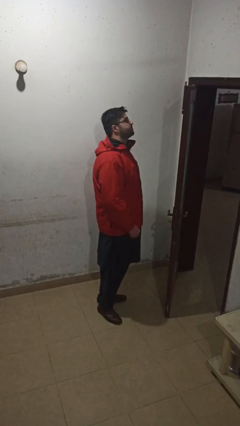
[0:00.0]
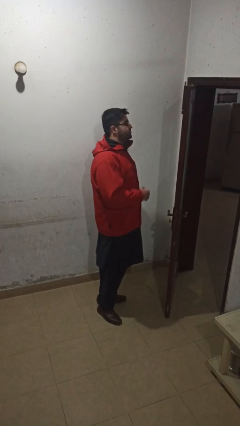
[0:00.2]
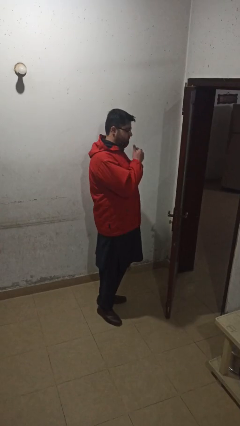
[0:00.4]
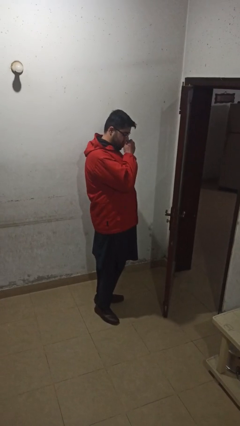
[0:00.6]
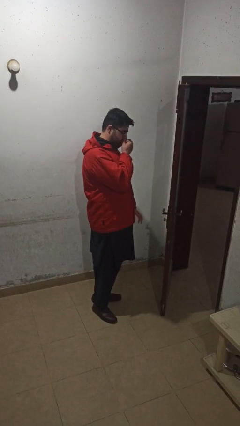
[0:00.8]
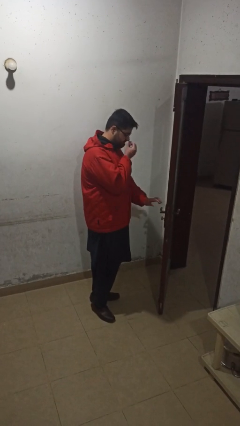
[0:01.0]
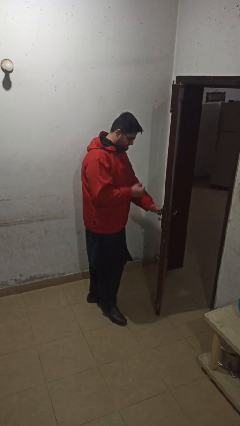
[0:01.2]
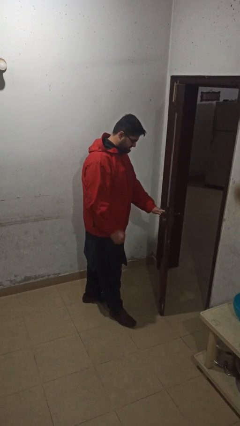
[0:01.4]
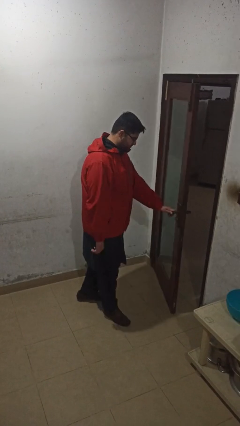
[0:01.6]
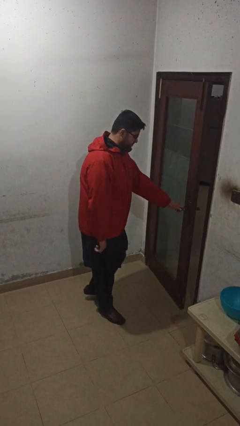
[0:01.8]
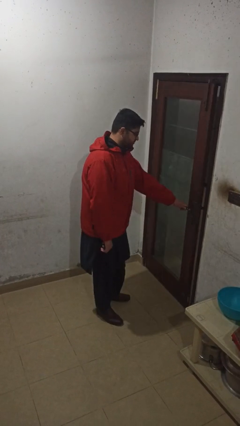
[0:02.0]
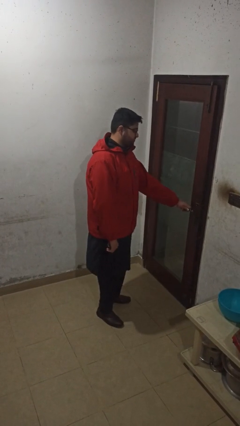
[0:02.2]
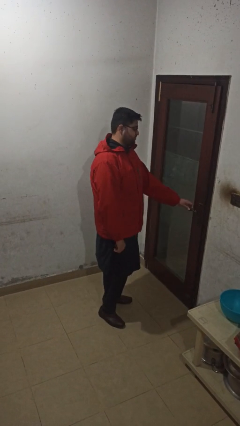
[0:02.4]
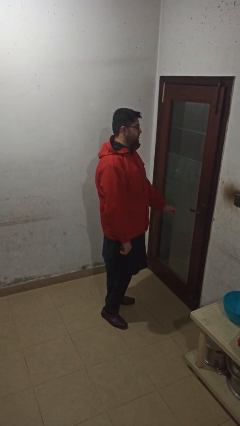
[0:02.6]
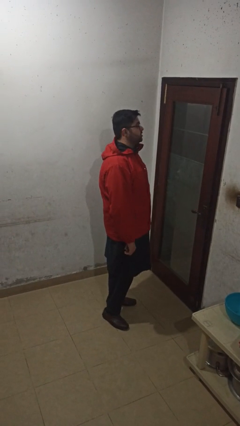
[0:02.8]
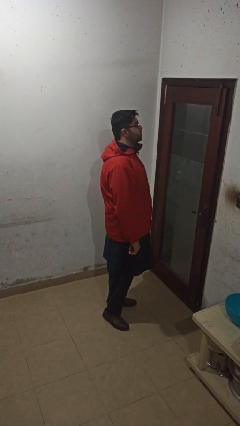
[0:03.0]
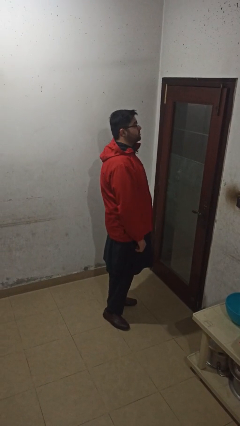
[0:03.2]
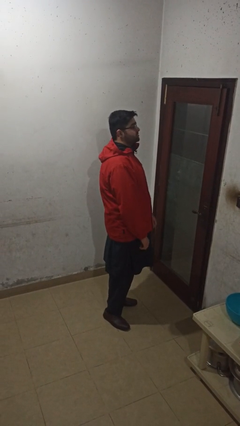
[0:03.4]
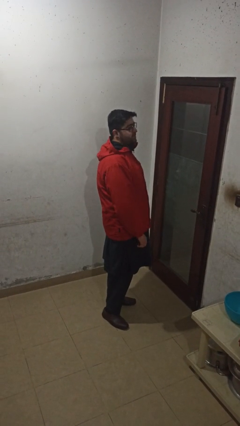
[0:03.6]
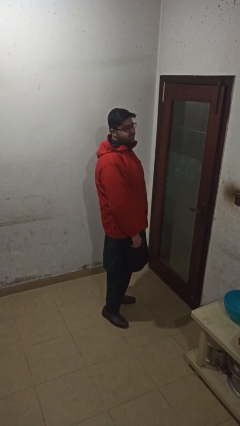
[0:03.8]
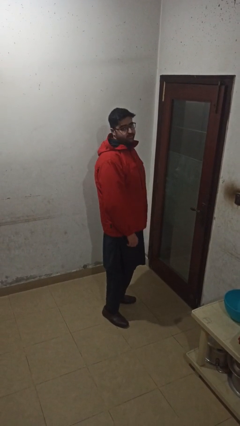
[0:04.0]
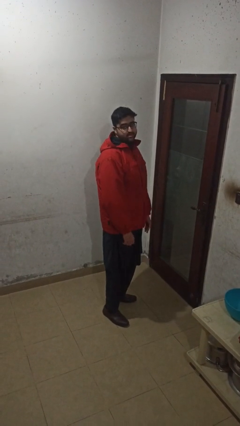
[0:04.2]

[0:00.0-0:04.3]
person closes facility door

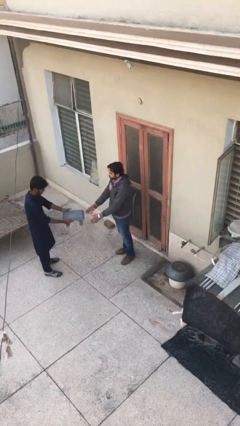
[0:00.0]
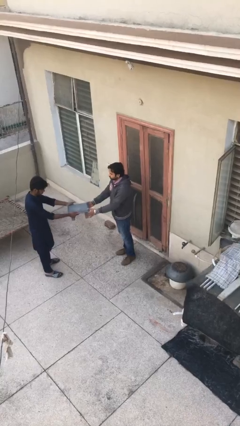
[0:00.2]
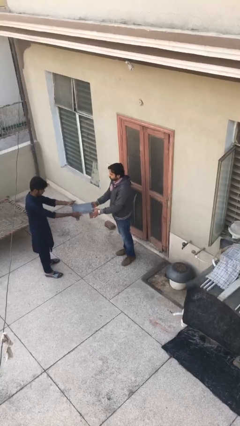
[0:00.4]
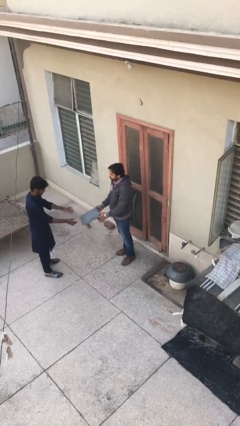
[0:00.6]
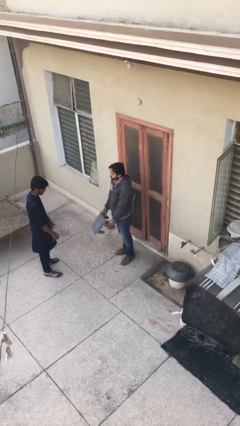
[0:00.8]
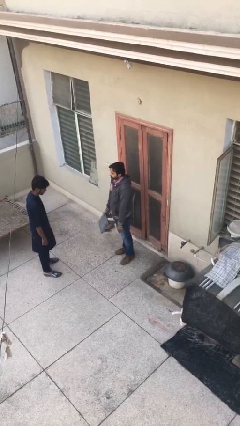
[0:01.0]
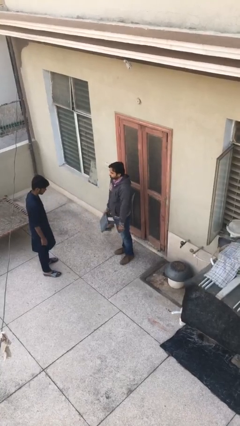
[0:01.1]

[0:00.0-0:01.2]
person transfers object to person

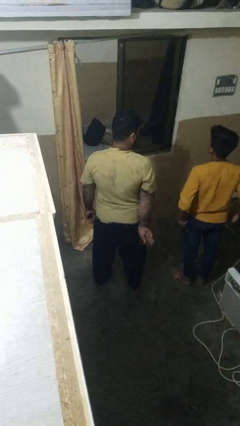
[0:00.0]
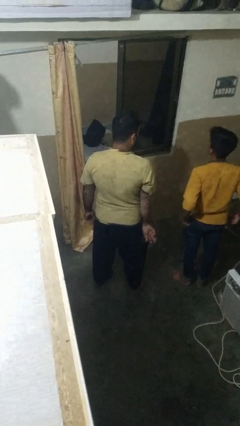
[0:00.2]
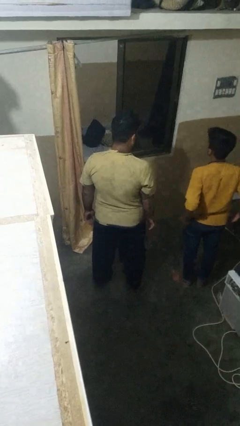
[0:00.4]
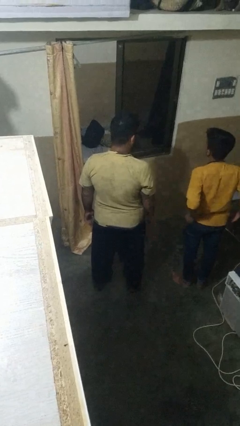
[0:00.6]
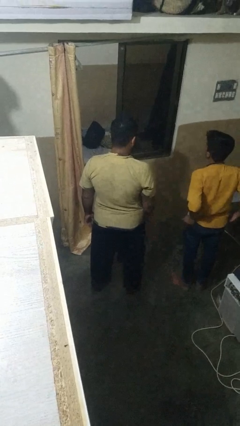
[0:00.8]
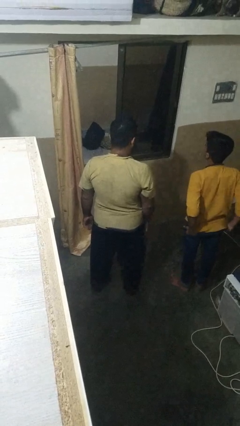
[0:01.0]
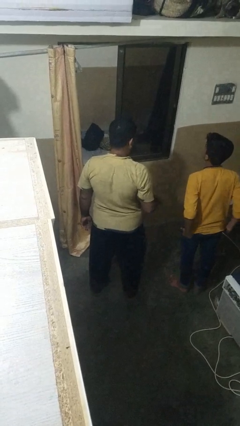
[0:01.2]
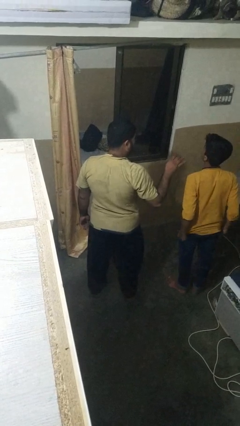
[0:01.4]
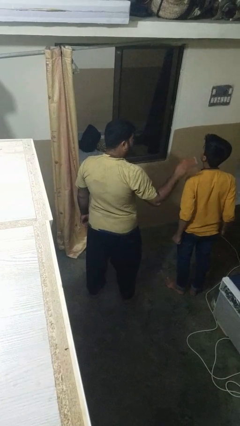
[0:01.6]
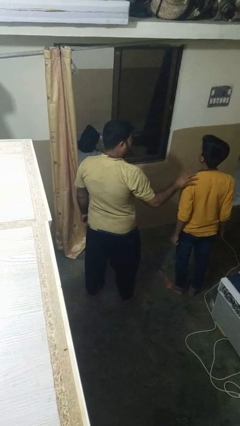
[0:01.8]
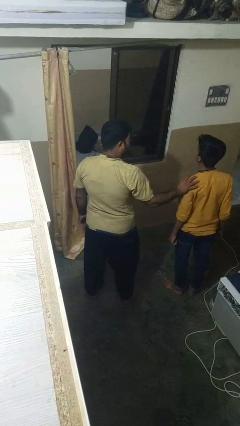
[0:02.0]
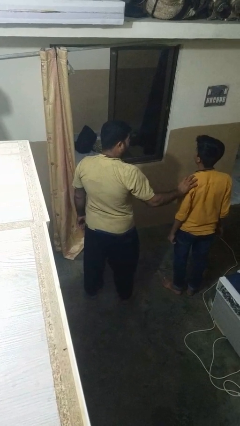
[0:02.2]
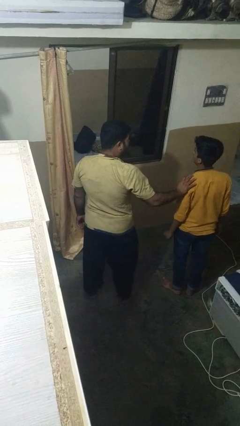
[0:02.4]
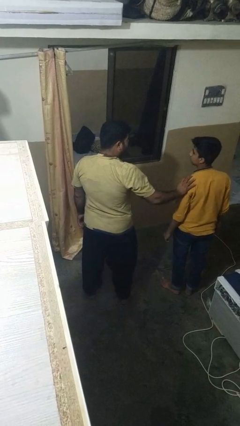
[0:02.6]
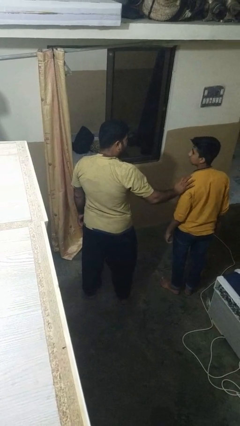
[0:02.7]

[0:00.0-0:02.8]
person pounds shoulders of person

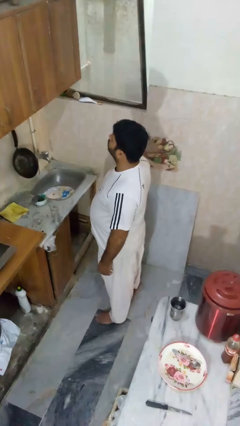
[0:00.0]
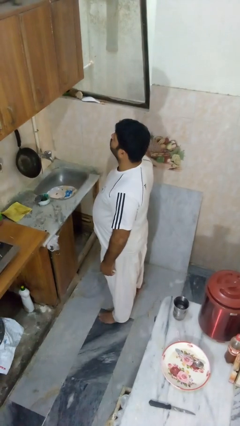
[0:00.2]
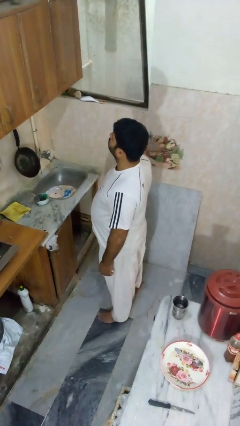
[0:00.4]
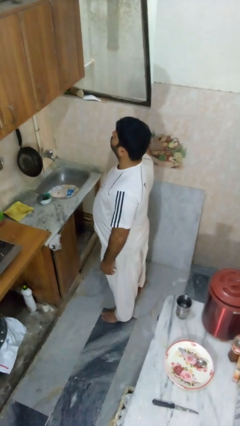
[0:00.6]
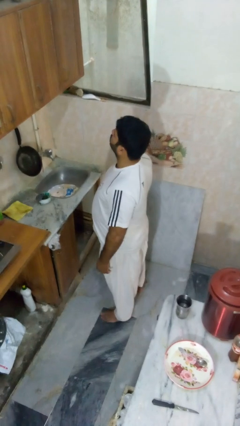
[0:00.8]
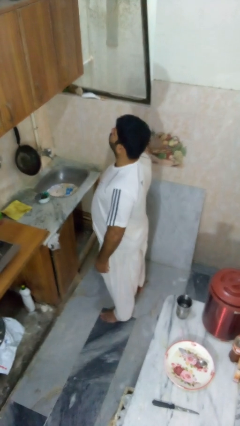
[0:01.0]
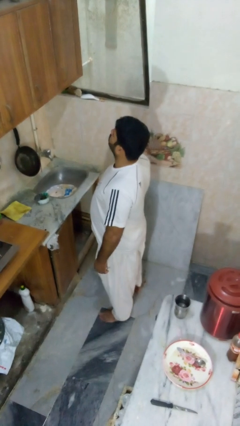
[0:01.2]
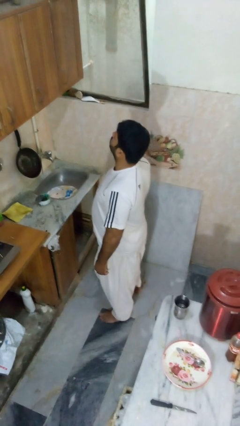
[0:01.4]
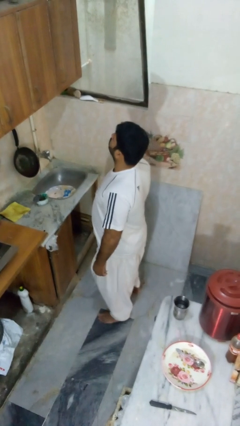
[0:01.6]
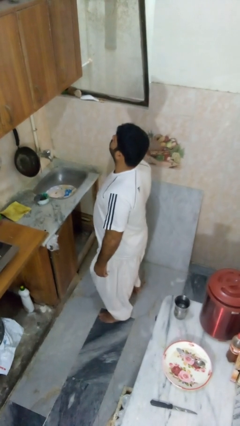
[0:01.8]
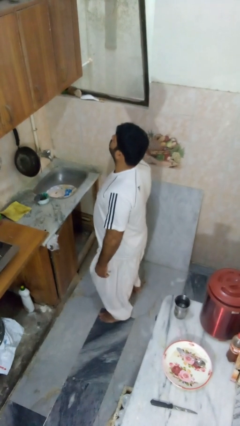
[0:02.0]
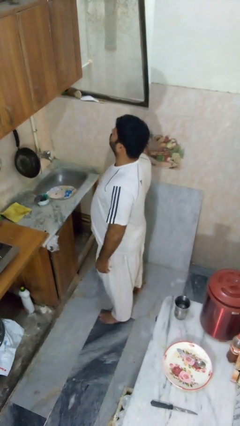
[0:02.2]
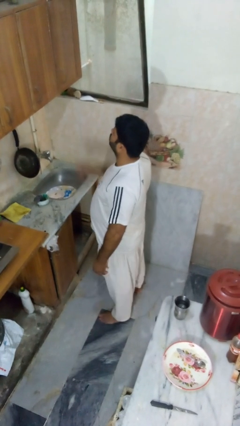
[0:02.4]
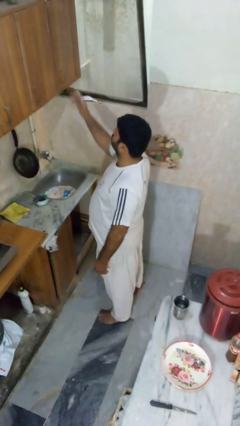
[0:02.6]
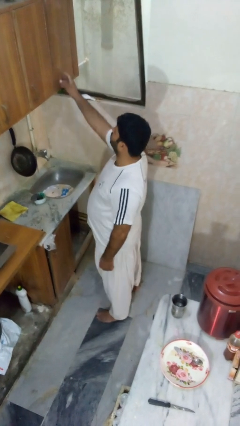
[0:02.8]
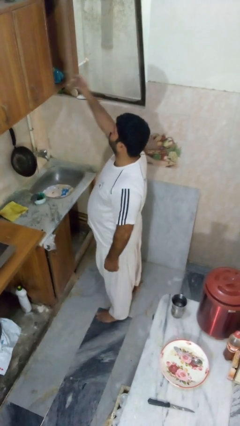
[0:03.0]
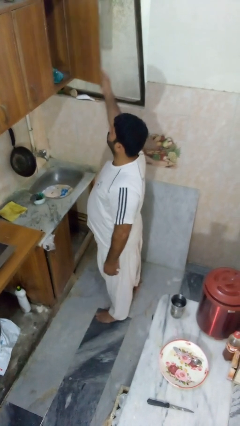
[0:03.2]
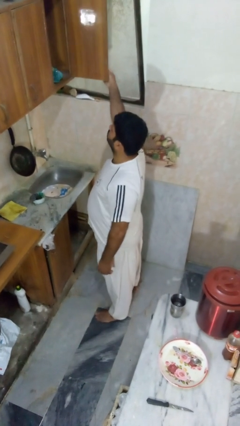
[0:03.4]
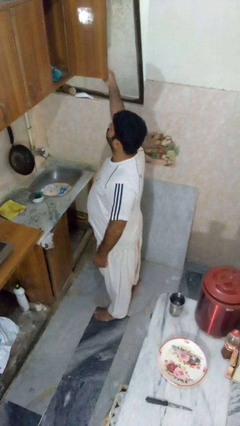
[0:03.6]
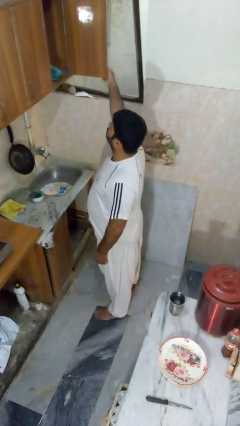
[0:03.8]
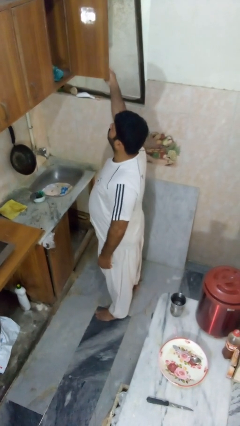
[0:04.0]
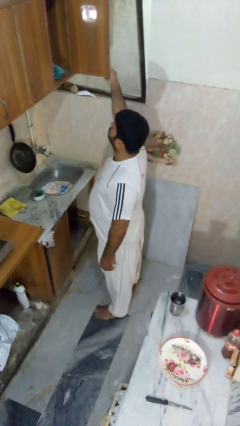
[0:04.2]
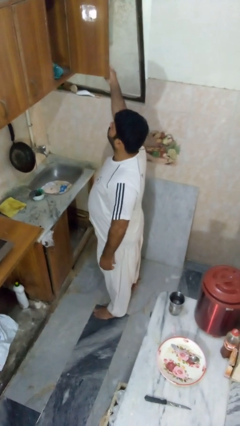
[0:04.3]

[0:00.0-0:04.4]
person opens cabinet

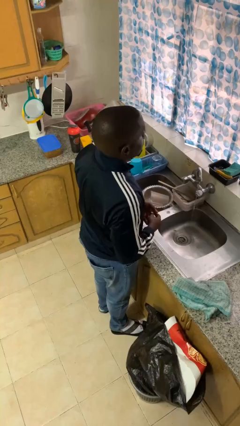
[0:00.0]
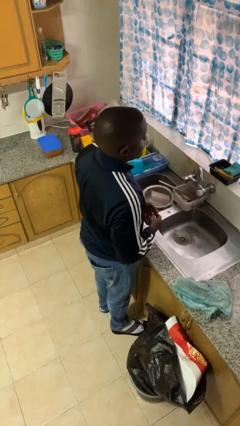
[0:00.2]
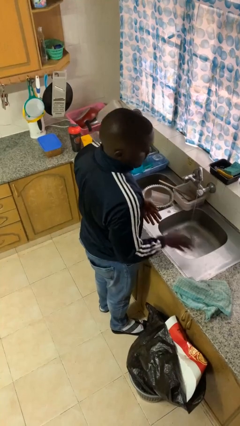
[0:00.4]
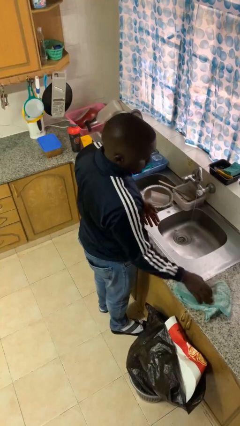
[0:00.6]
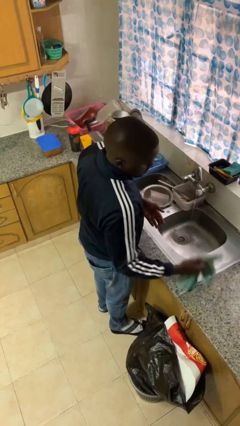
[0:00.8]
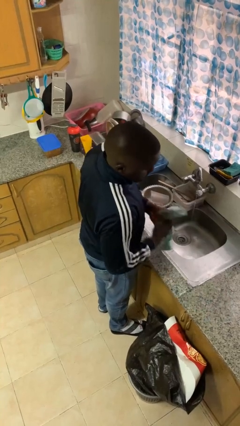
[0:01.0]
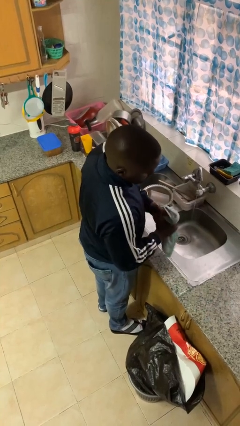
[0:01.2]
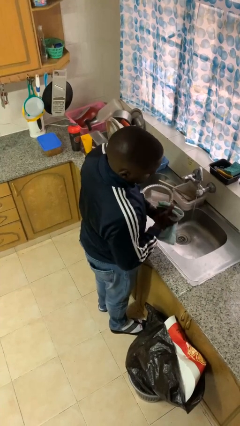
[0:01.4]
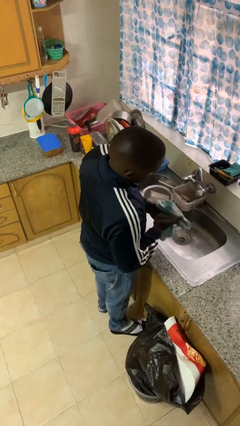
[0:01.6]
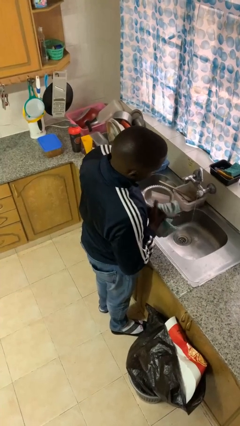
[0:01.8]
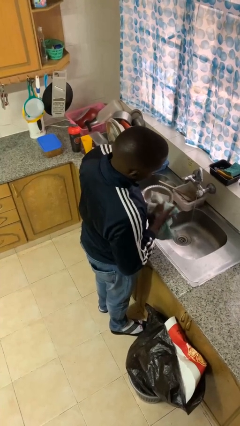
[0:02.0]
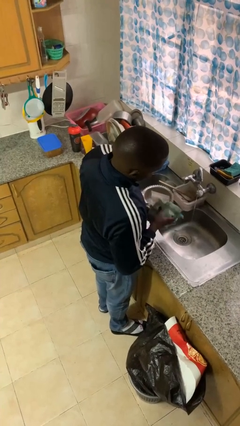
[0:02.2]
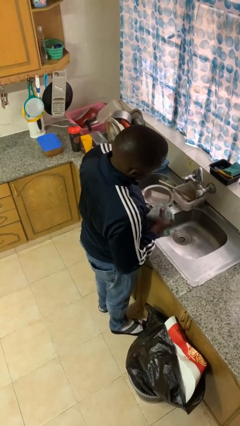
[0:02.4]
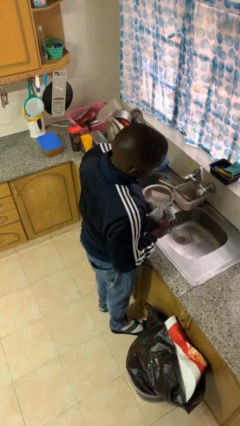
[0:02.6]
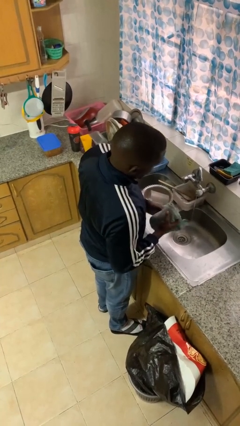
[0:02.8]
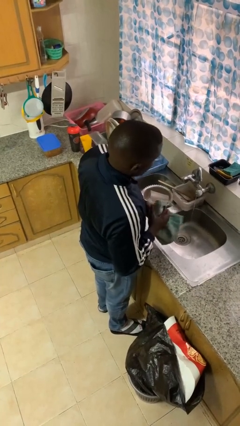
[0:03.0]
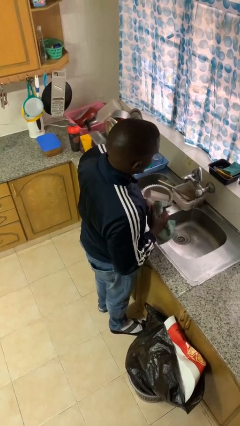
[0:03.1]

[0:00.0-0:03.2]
person dries hands with towel

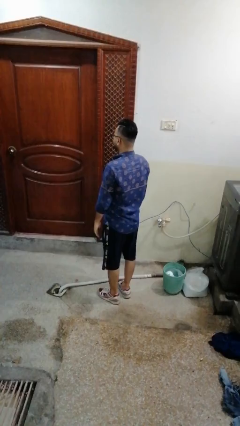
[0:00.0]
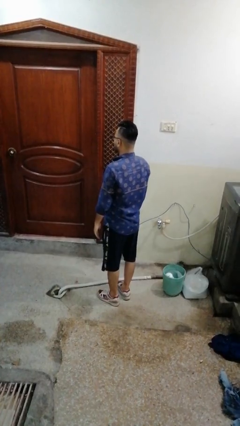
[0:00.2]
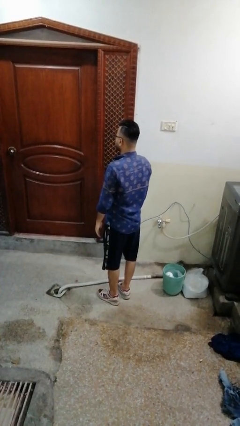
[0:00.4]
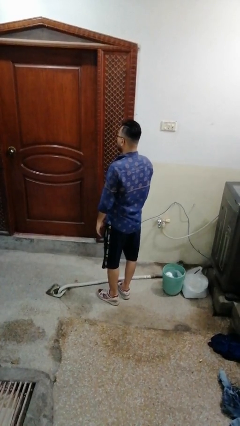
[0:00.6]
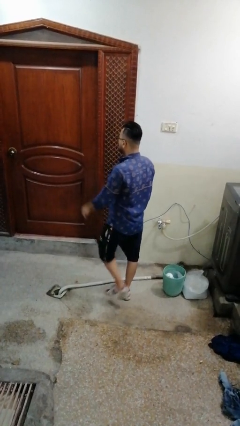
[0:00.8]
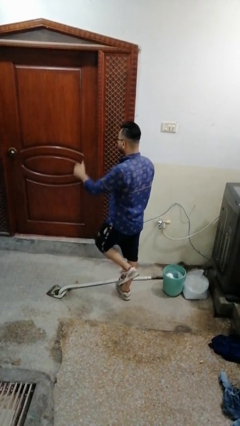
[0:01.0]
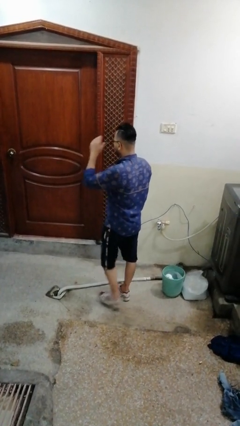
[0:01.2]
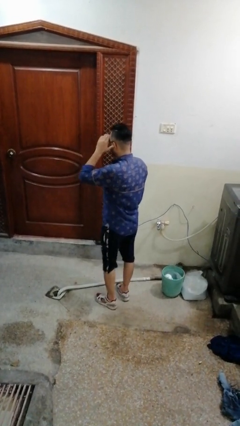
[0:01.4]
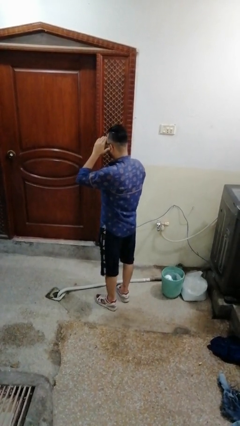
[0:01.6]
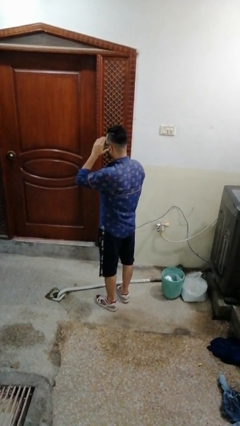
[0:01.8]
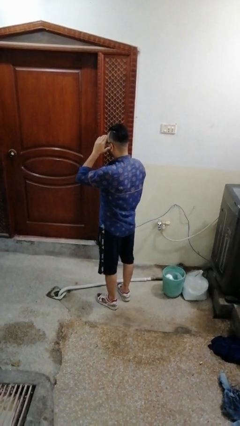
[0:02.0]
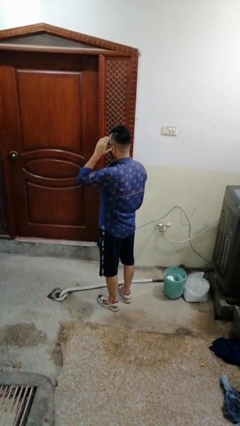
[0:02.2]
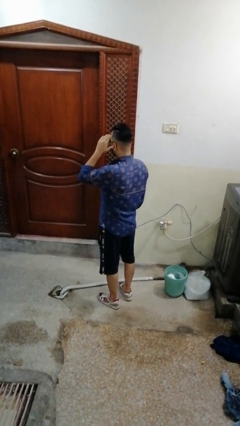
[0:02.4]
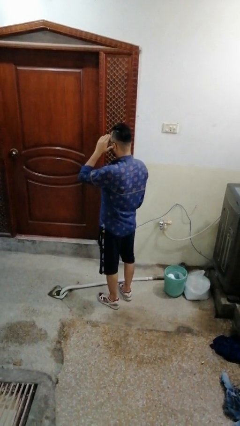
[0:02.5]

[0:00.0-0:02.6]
person salutes
